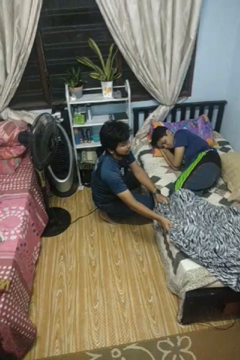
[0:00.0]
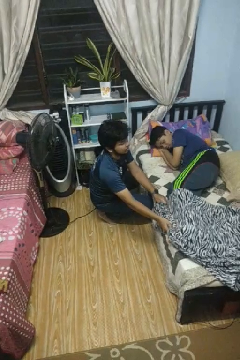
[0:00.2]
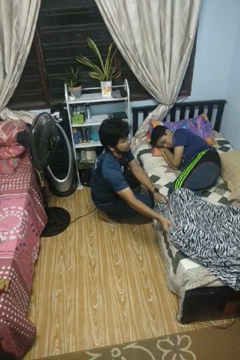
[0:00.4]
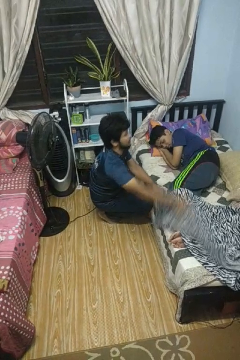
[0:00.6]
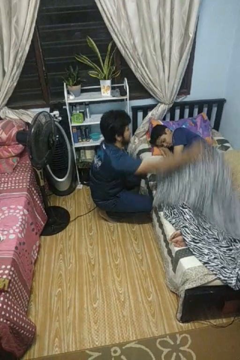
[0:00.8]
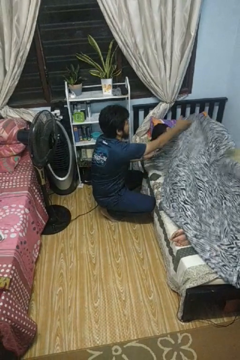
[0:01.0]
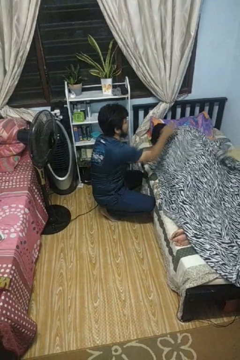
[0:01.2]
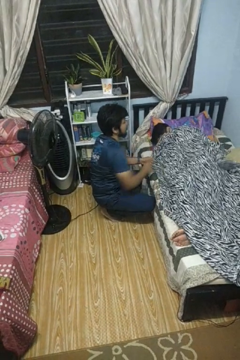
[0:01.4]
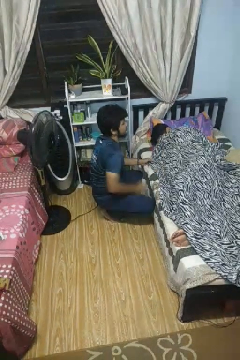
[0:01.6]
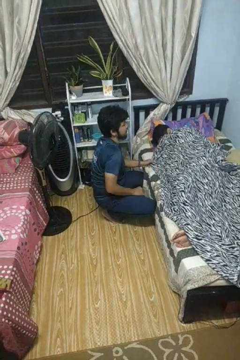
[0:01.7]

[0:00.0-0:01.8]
person covers friend with blanket

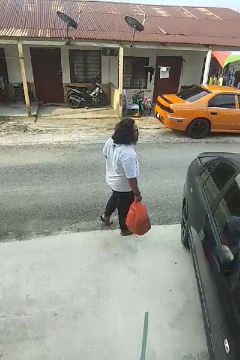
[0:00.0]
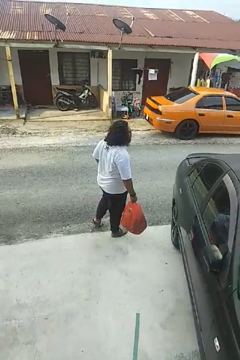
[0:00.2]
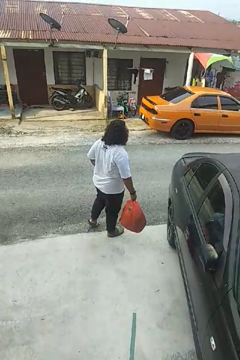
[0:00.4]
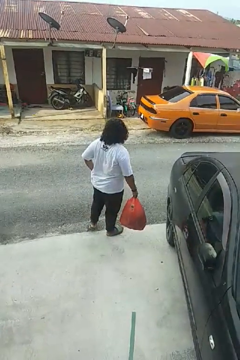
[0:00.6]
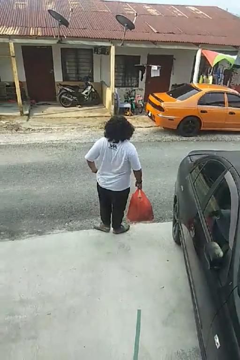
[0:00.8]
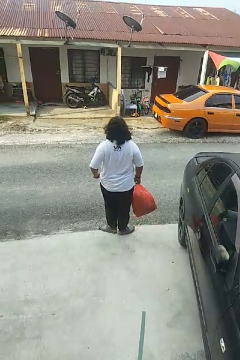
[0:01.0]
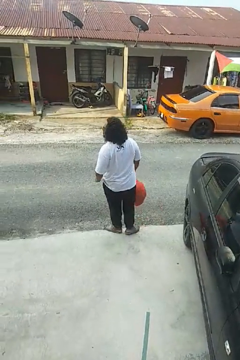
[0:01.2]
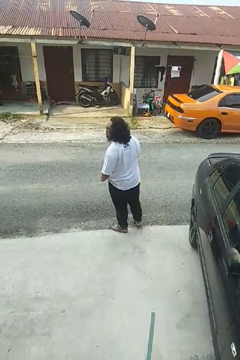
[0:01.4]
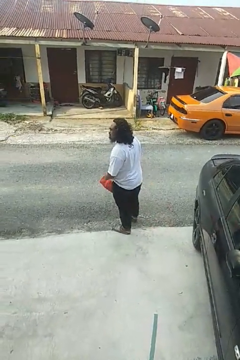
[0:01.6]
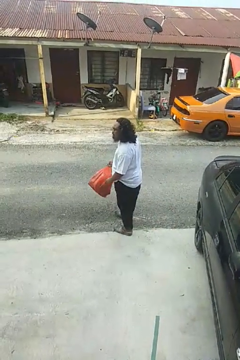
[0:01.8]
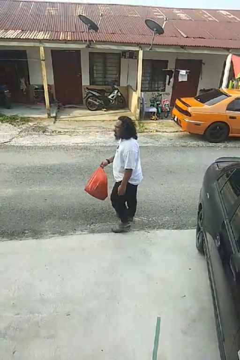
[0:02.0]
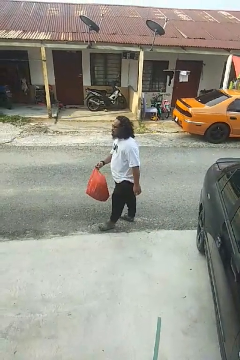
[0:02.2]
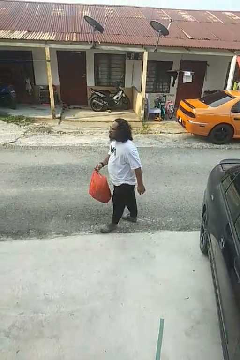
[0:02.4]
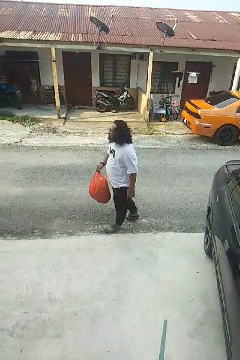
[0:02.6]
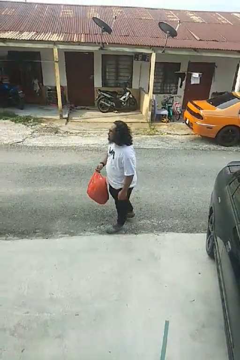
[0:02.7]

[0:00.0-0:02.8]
person carries groceries

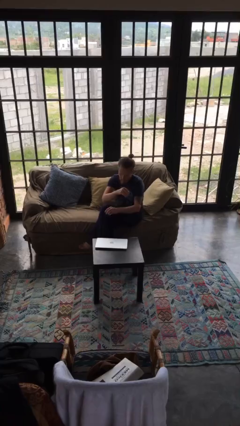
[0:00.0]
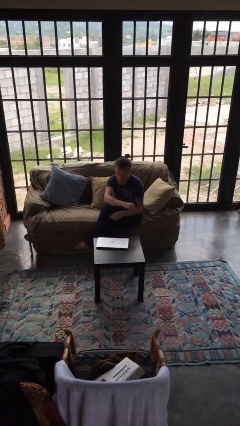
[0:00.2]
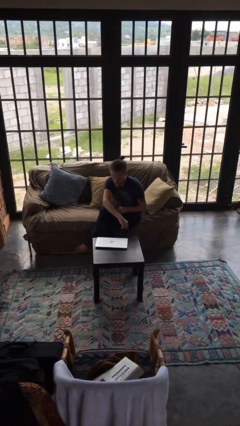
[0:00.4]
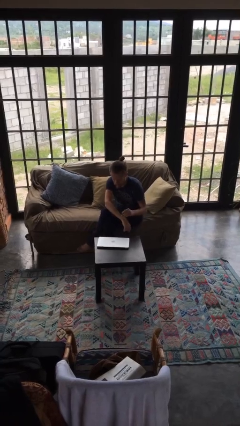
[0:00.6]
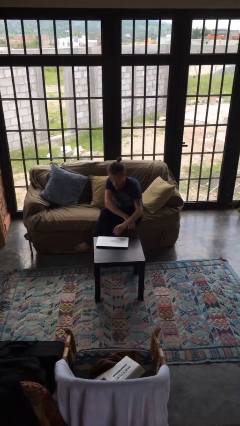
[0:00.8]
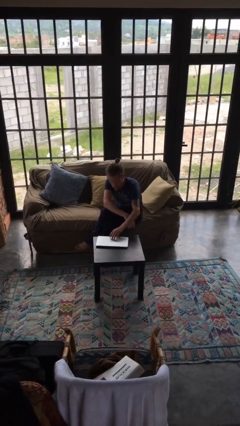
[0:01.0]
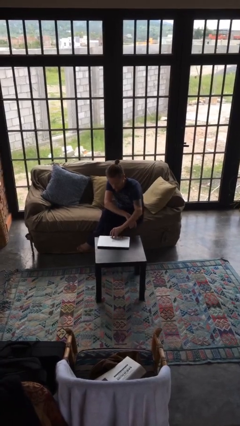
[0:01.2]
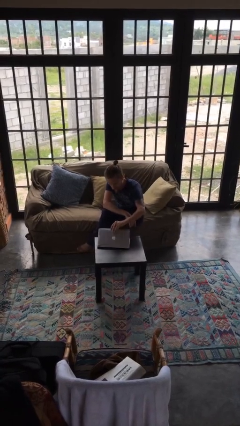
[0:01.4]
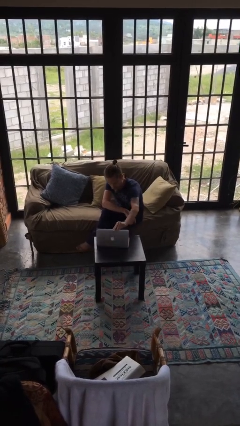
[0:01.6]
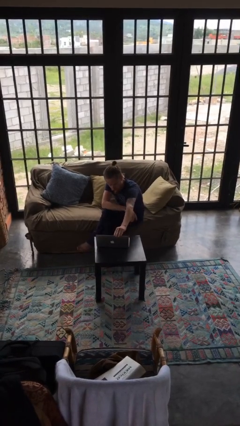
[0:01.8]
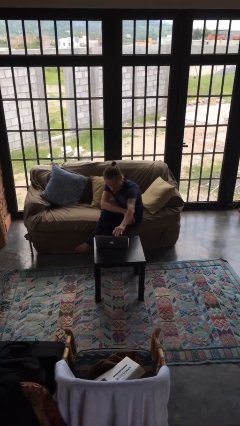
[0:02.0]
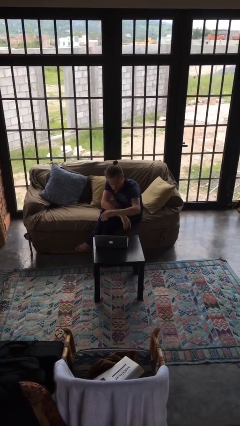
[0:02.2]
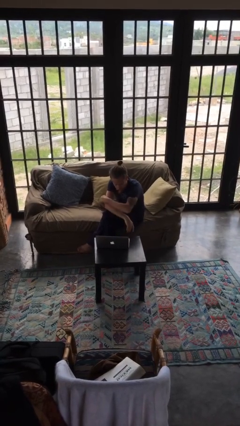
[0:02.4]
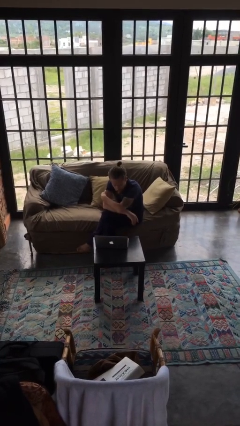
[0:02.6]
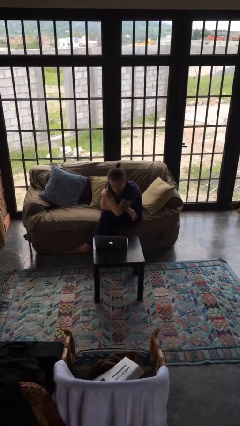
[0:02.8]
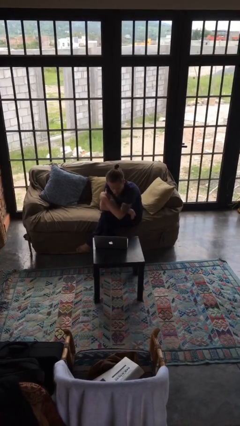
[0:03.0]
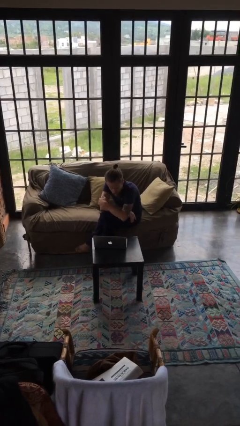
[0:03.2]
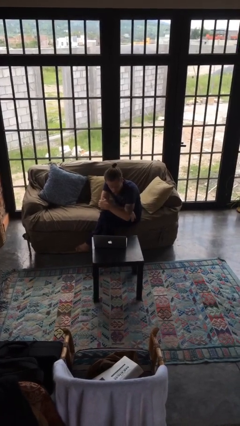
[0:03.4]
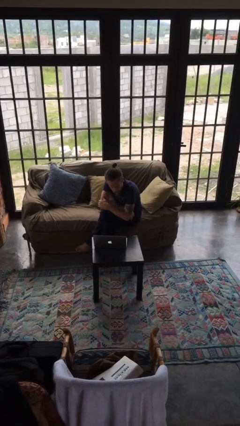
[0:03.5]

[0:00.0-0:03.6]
person opens laptop

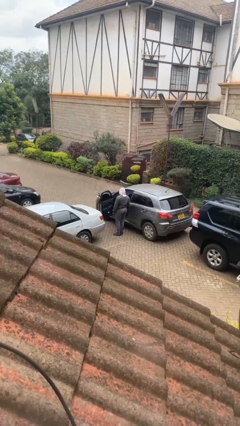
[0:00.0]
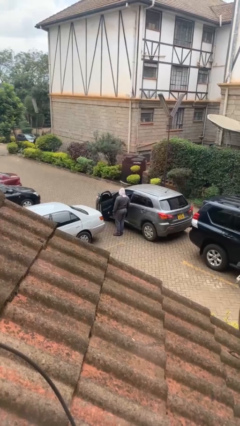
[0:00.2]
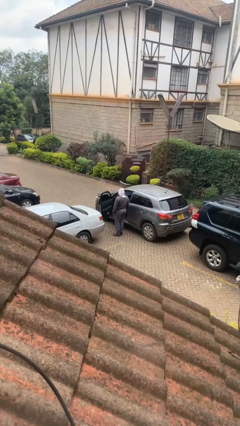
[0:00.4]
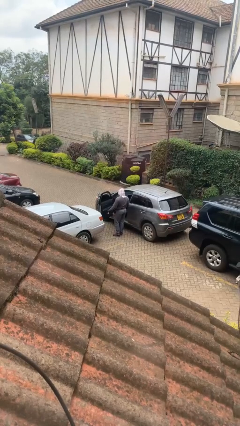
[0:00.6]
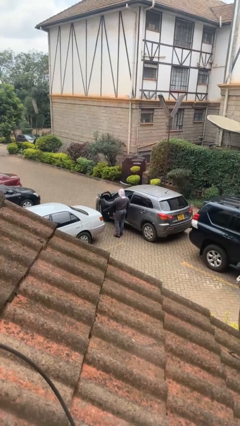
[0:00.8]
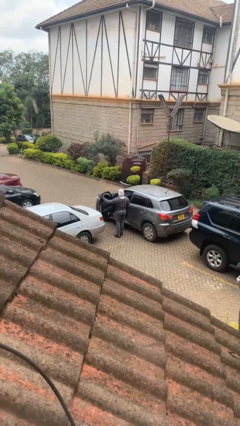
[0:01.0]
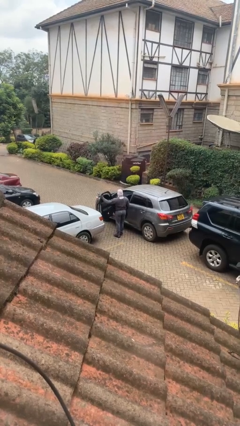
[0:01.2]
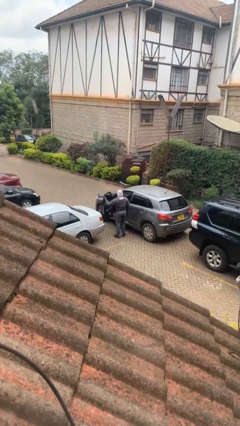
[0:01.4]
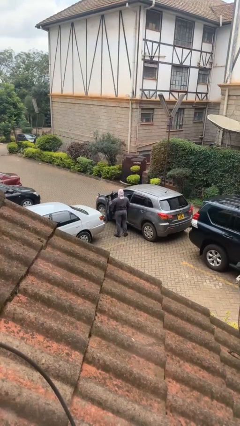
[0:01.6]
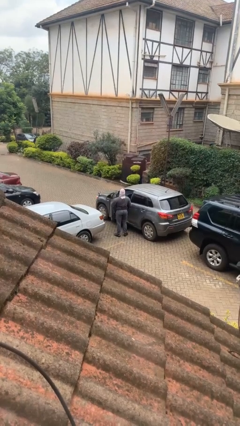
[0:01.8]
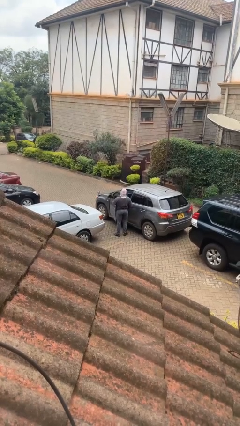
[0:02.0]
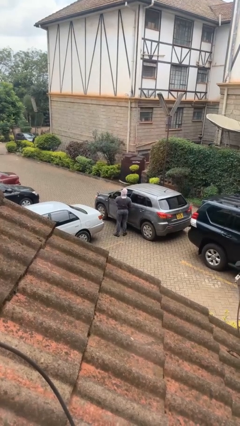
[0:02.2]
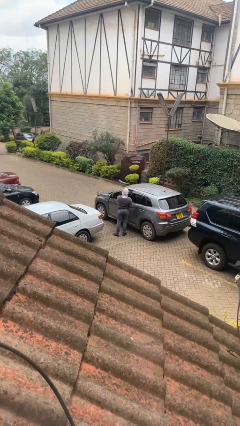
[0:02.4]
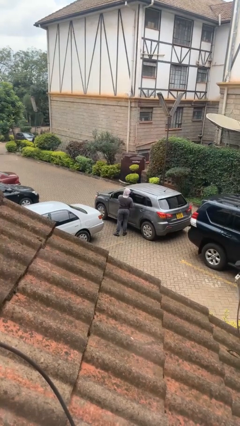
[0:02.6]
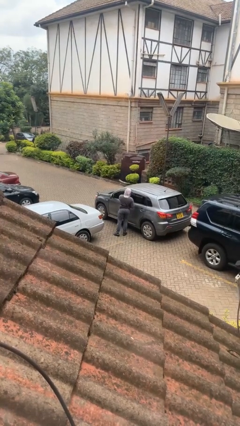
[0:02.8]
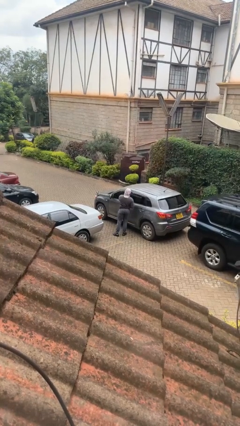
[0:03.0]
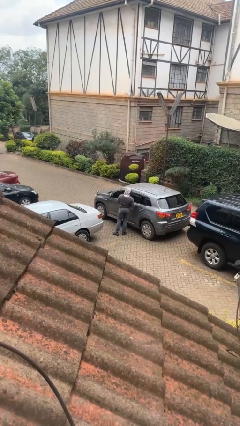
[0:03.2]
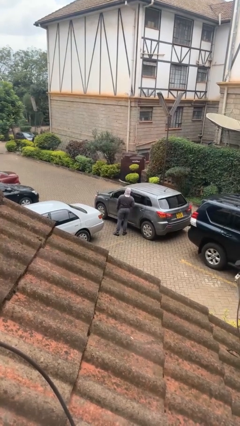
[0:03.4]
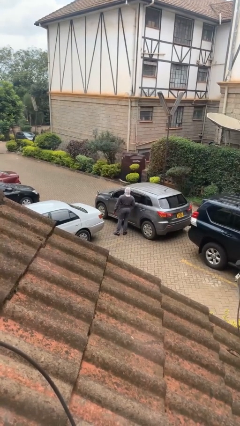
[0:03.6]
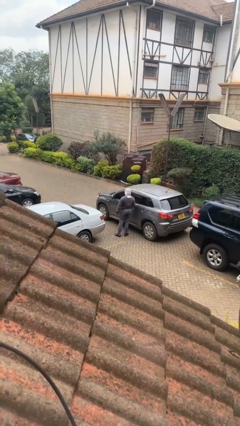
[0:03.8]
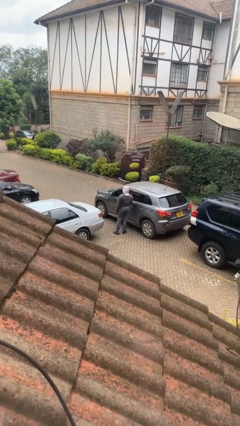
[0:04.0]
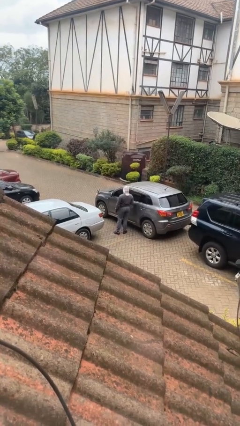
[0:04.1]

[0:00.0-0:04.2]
person closes car door

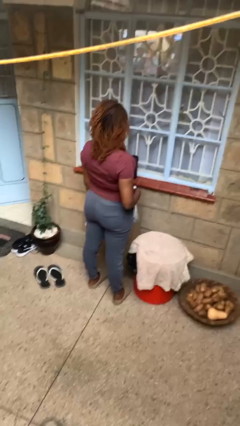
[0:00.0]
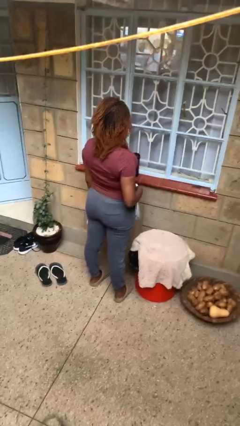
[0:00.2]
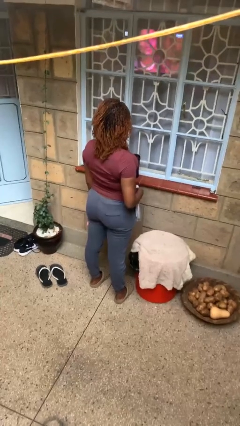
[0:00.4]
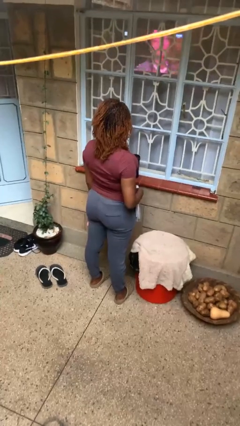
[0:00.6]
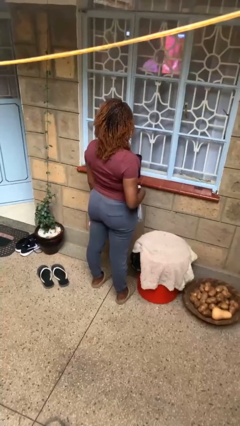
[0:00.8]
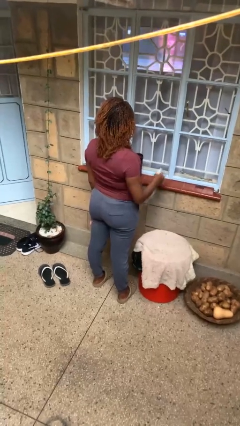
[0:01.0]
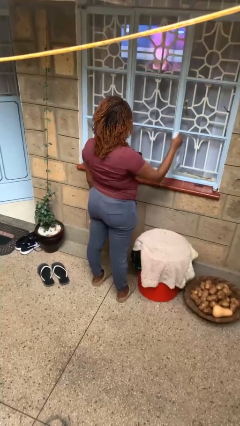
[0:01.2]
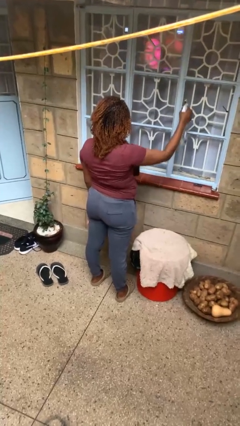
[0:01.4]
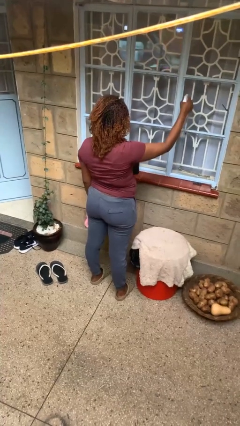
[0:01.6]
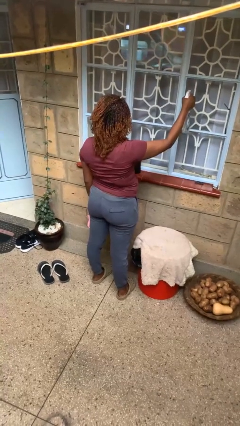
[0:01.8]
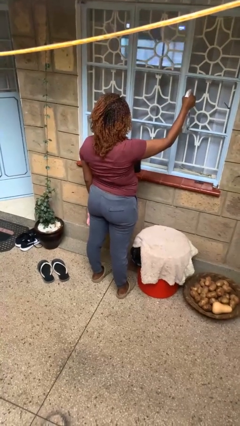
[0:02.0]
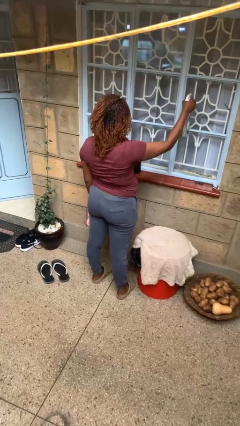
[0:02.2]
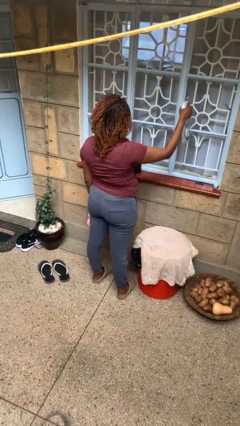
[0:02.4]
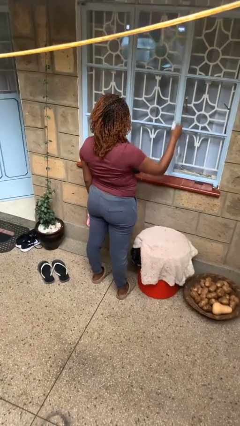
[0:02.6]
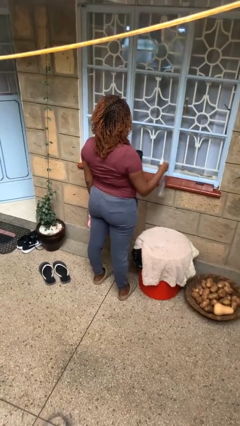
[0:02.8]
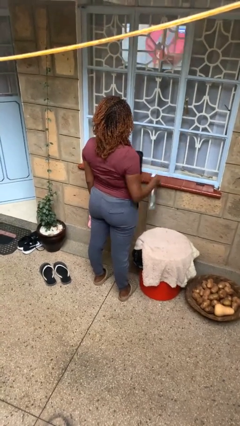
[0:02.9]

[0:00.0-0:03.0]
person sprays from bottle

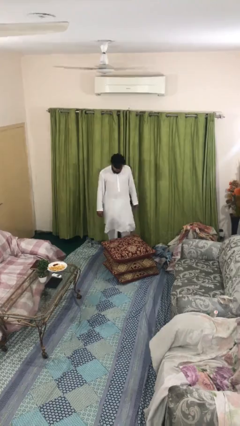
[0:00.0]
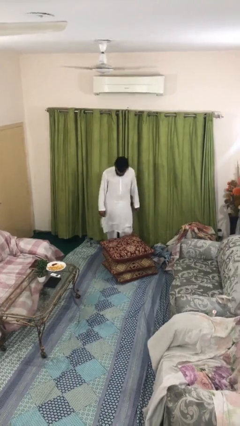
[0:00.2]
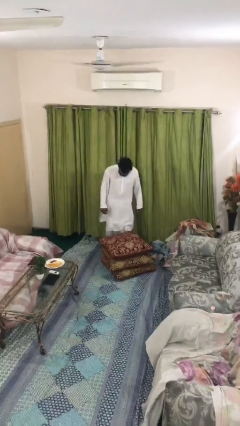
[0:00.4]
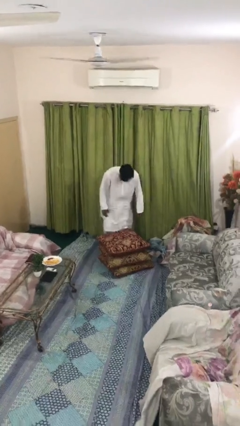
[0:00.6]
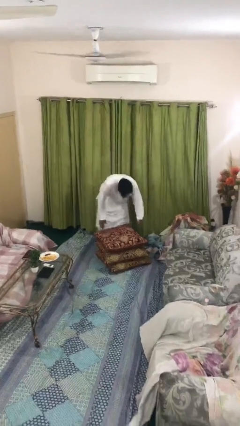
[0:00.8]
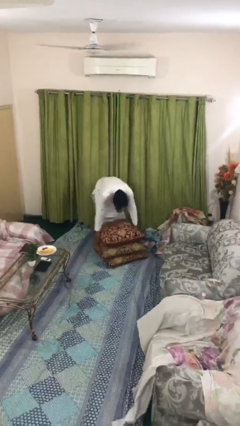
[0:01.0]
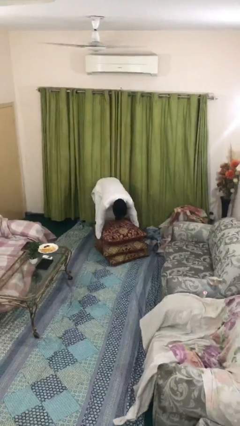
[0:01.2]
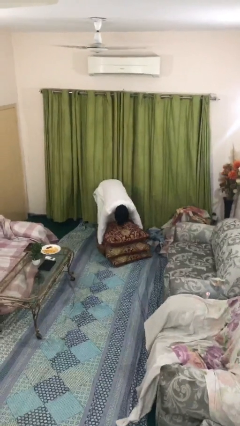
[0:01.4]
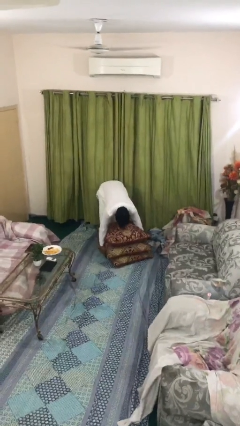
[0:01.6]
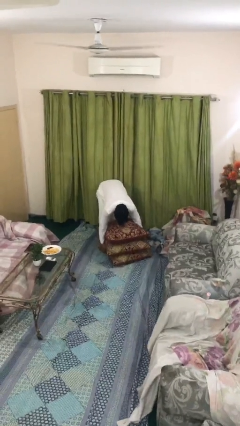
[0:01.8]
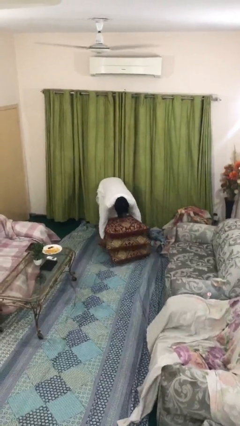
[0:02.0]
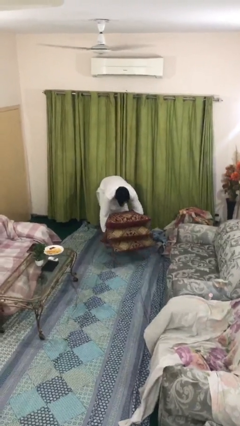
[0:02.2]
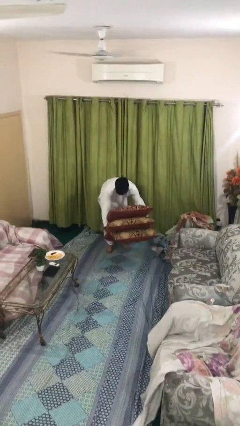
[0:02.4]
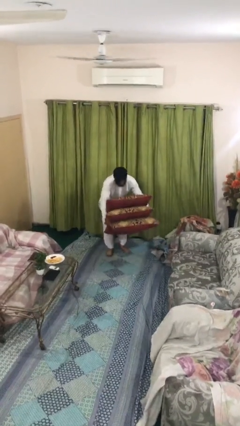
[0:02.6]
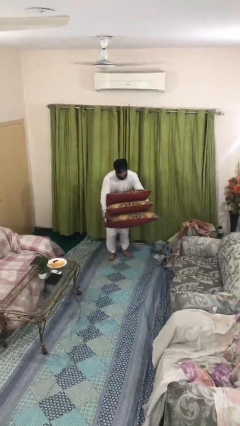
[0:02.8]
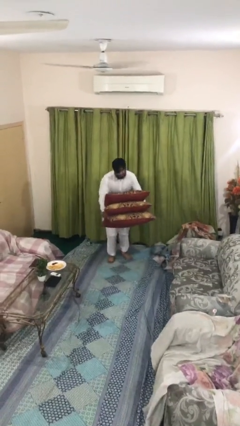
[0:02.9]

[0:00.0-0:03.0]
person picks up object from floor
